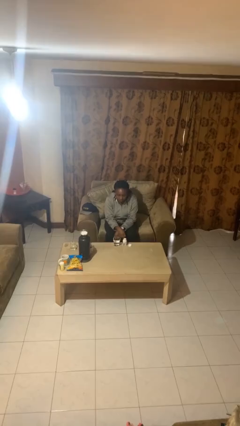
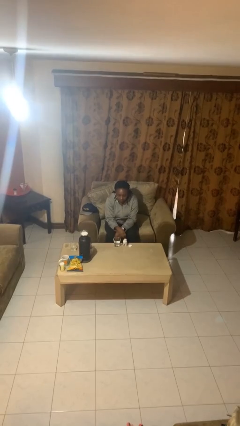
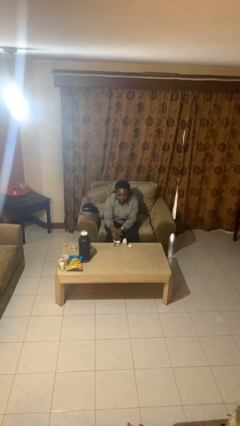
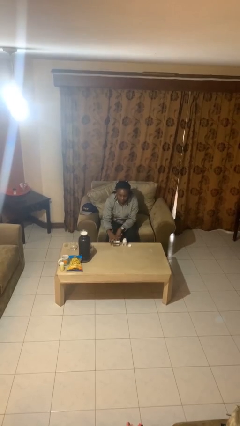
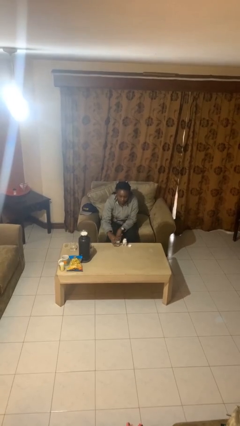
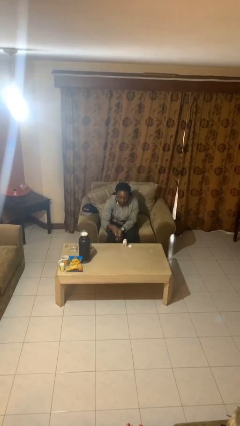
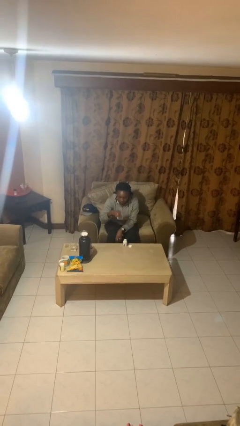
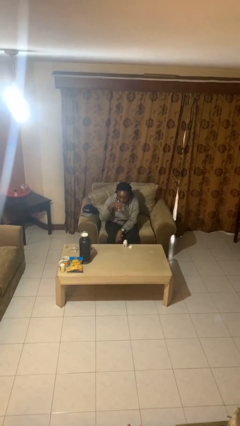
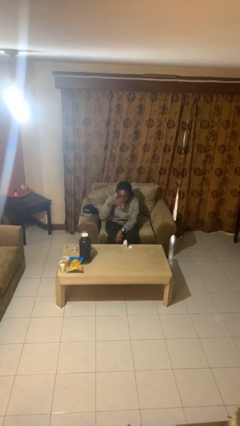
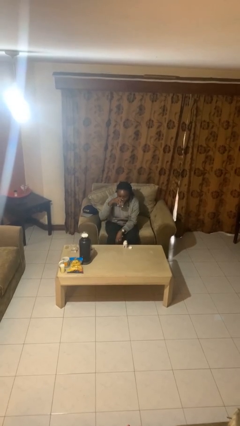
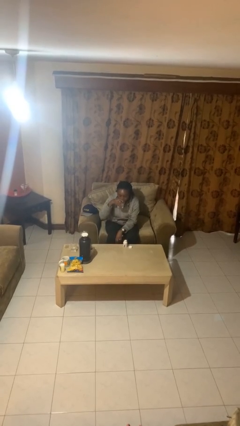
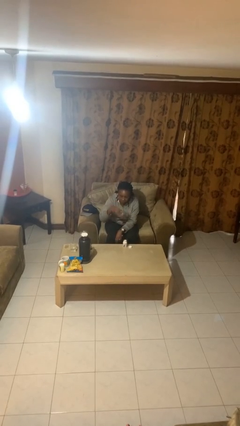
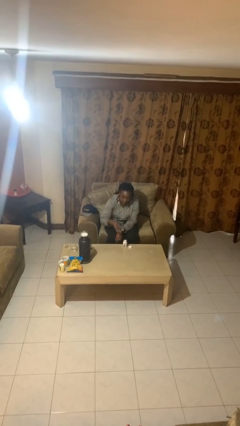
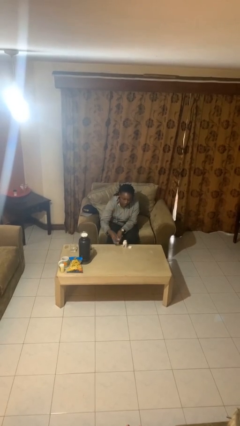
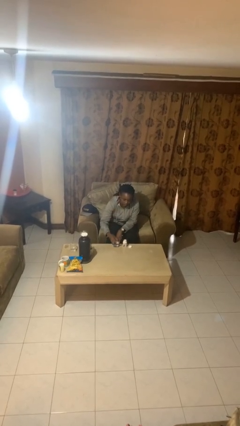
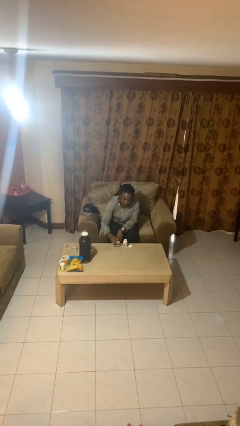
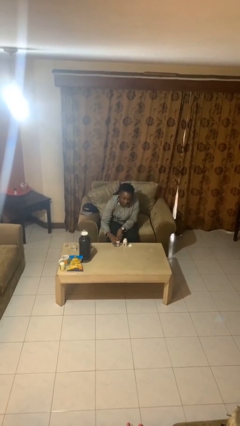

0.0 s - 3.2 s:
person drinks from cup

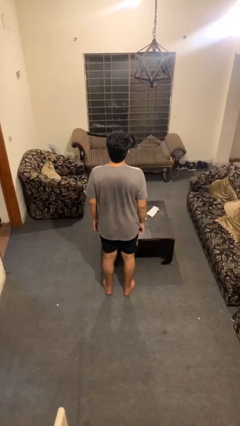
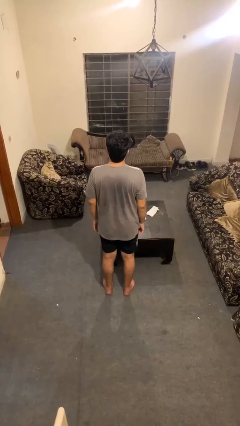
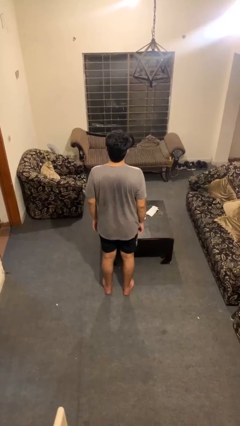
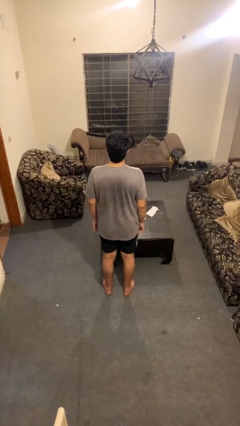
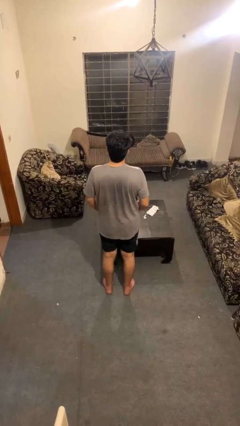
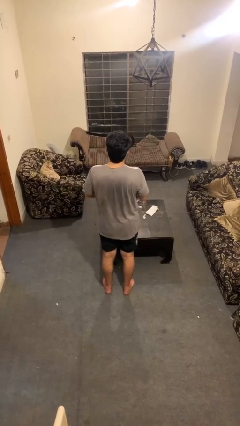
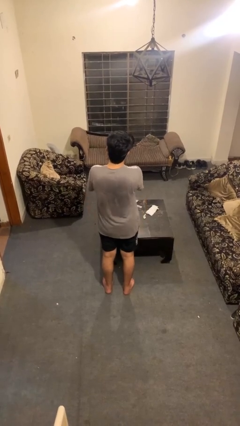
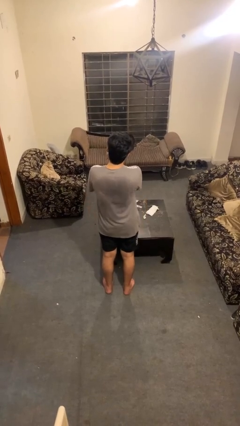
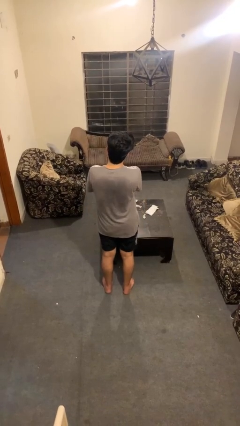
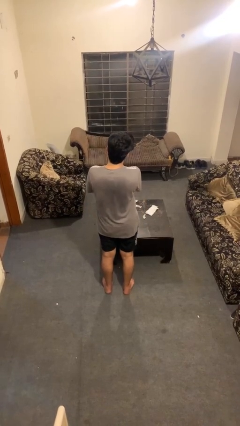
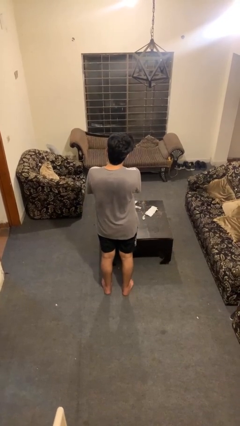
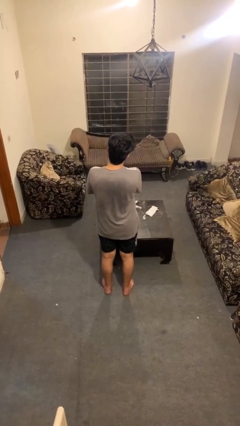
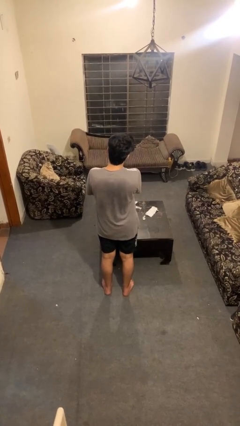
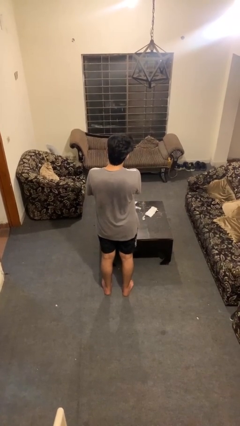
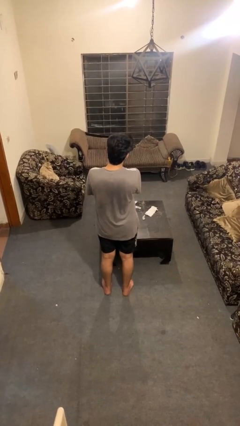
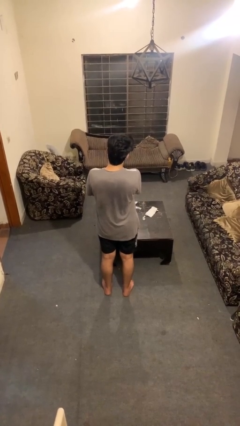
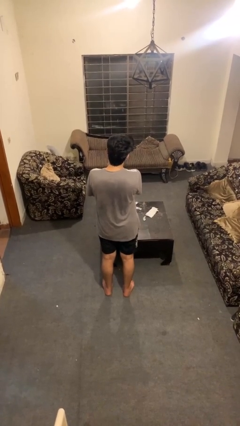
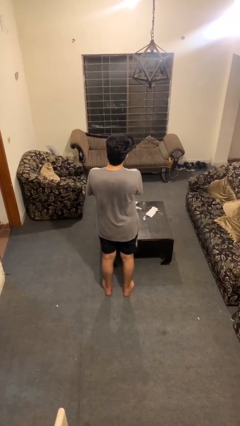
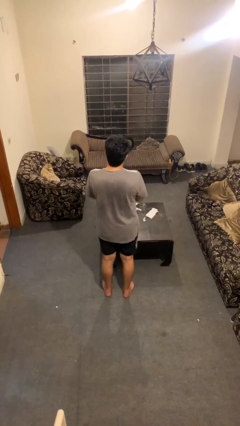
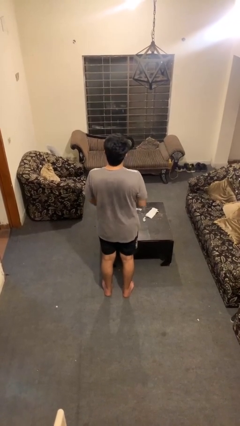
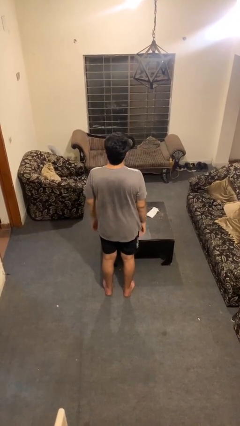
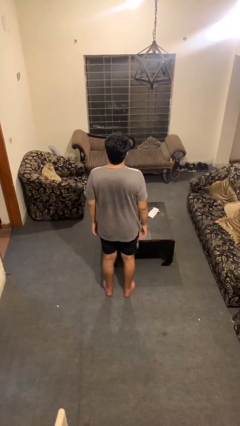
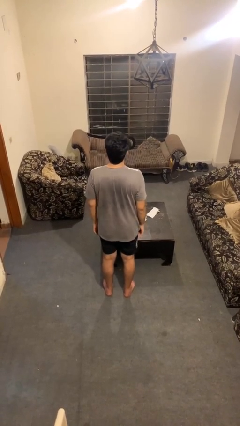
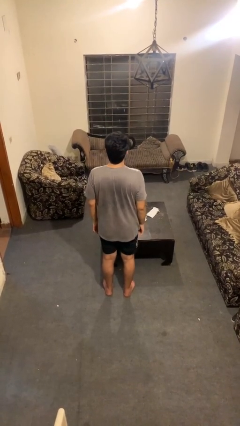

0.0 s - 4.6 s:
person strokes chin

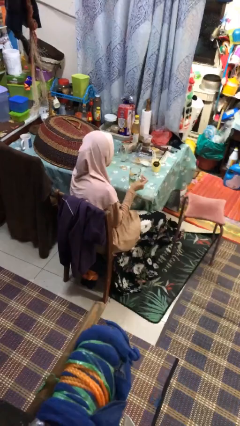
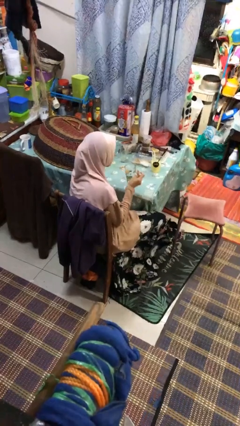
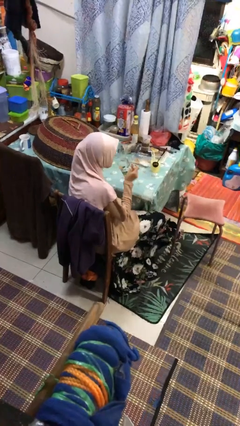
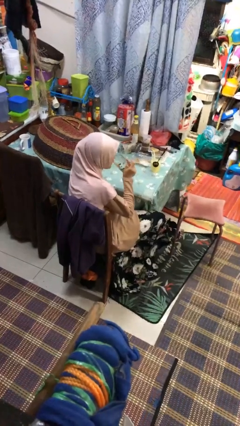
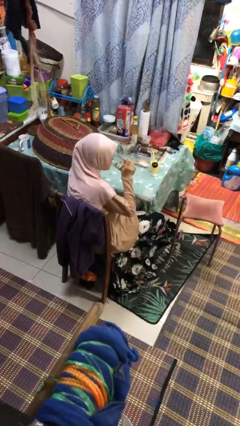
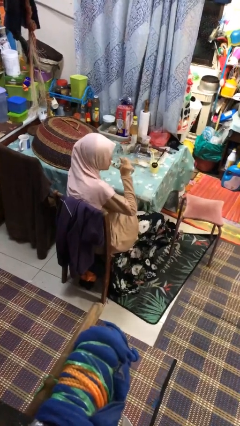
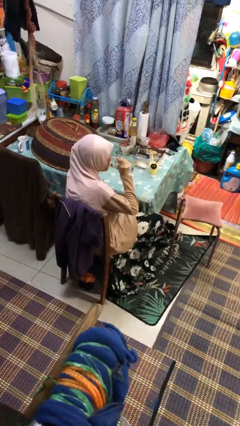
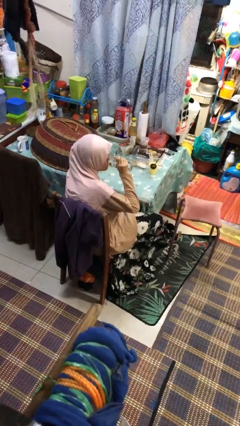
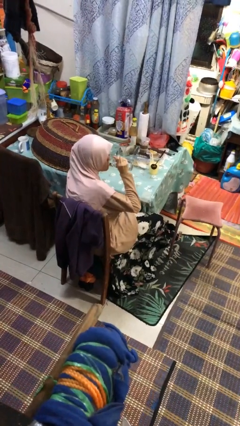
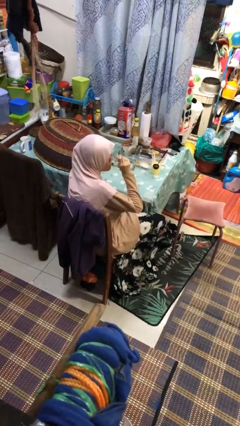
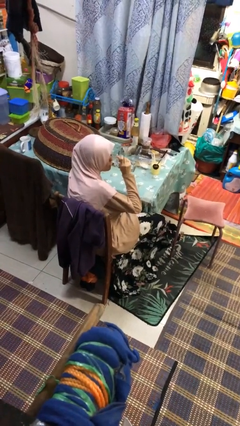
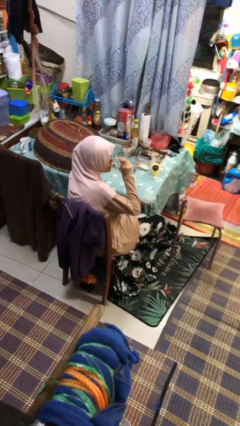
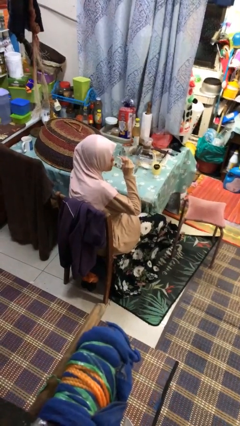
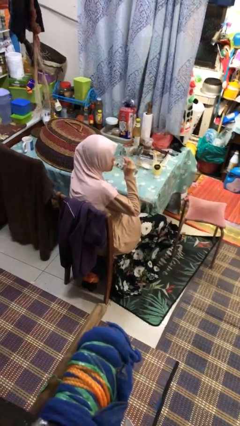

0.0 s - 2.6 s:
person drinks from mug

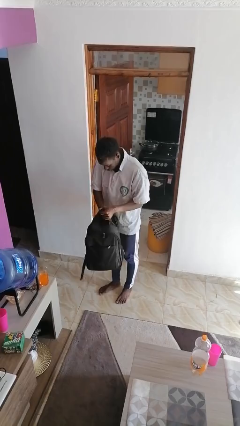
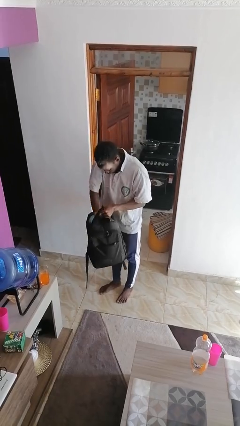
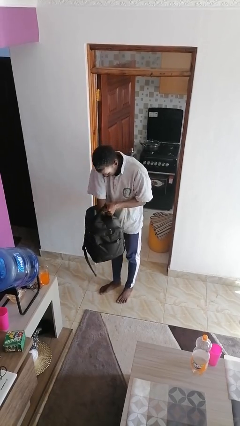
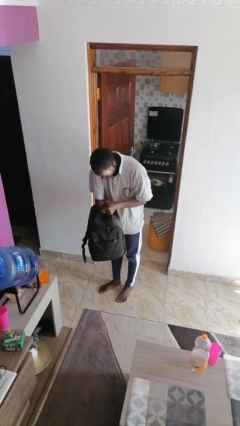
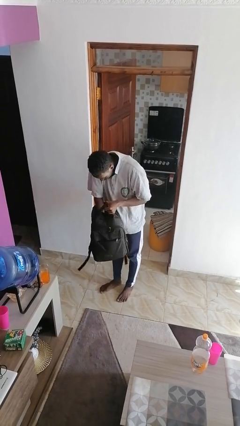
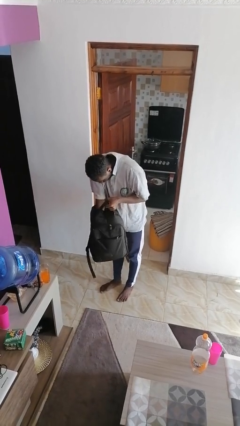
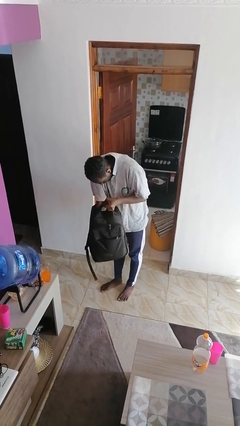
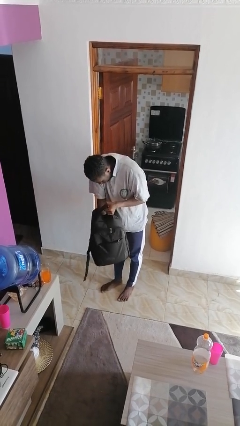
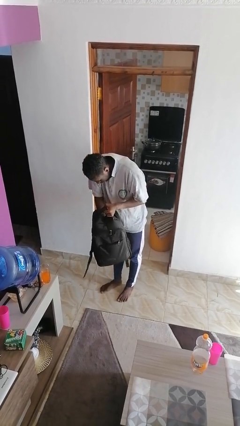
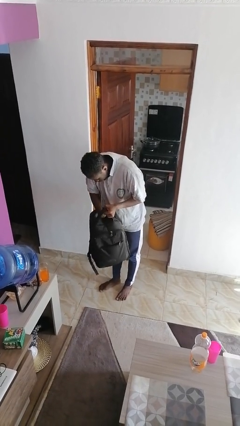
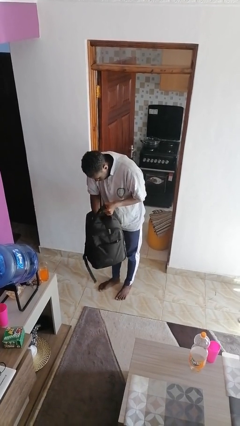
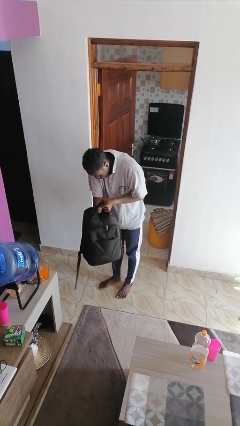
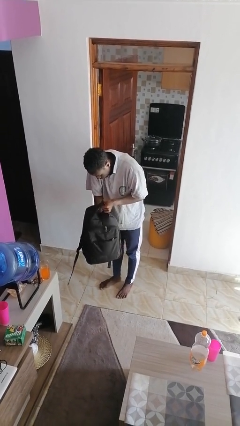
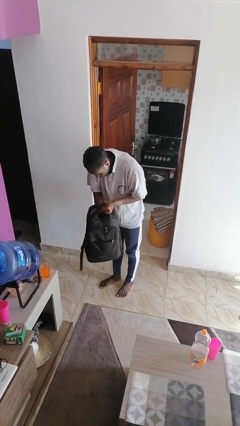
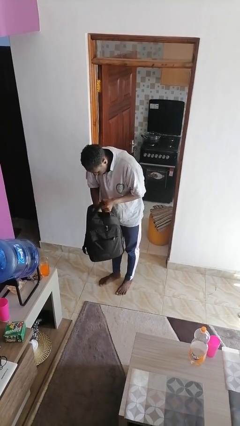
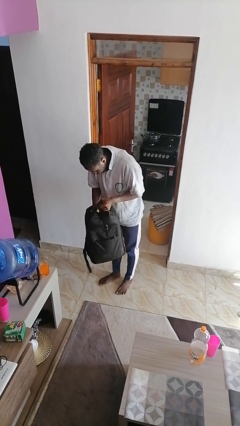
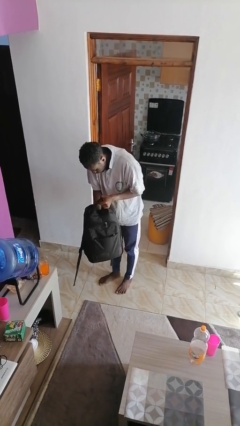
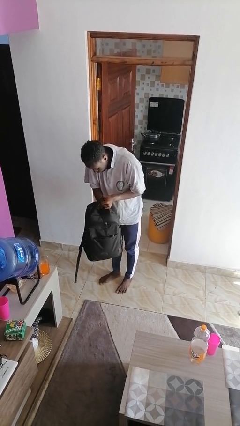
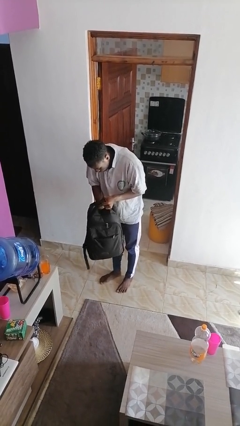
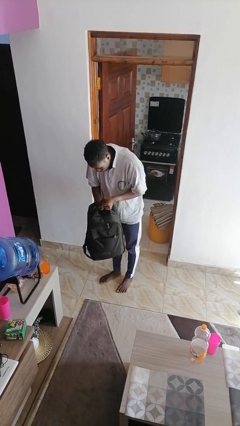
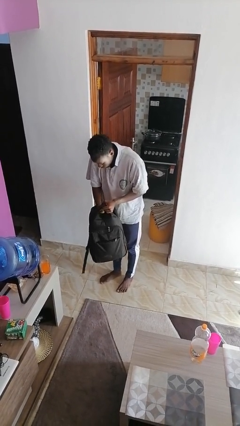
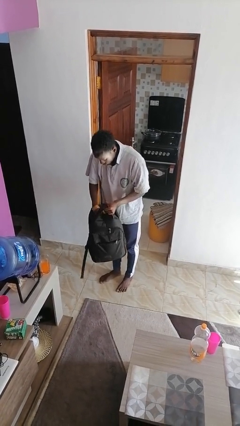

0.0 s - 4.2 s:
person searches in backpack

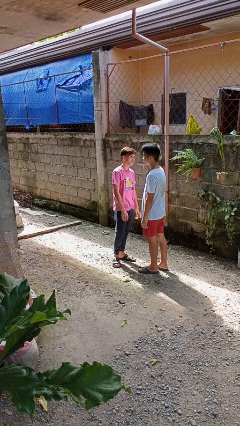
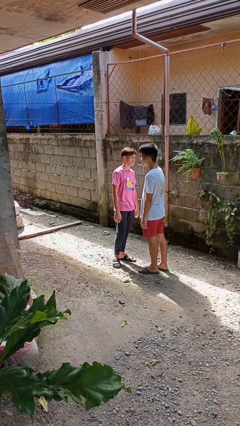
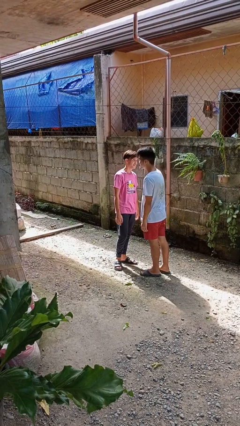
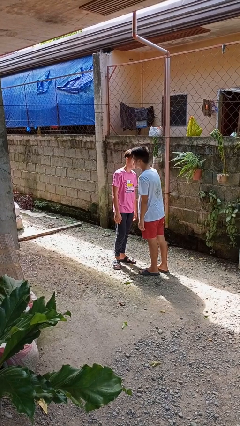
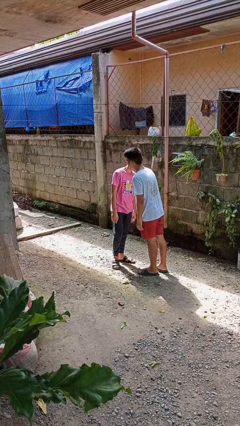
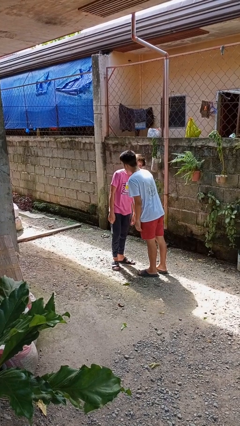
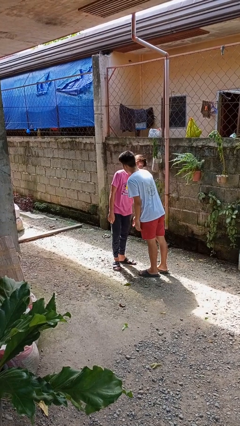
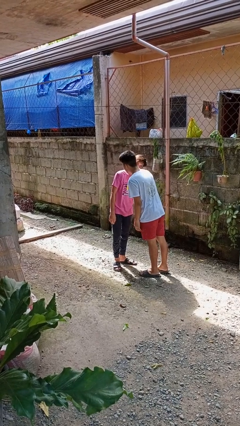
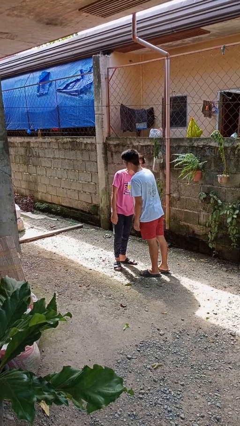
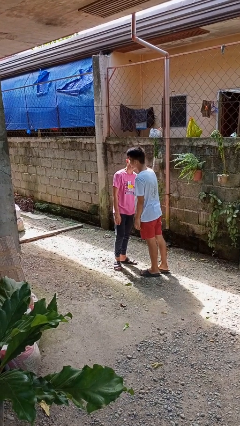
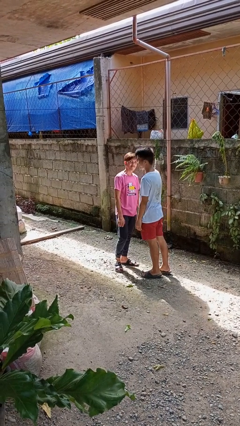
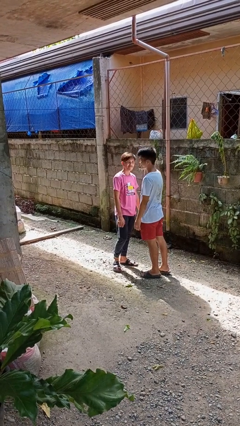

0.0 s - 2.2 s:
person kisses cheek of person

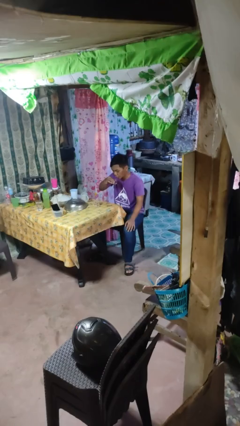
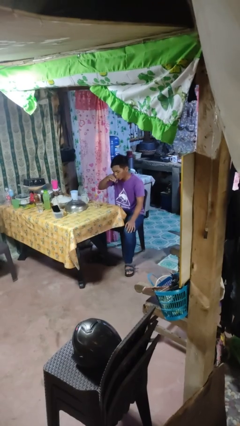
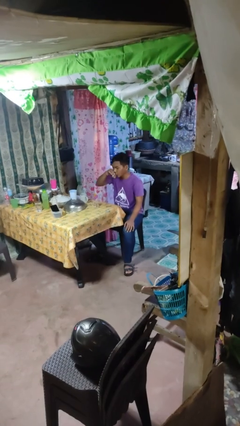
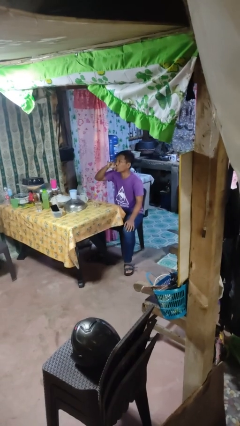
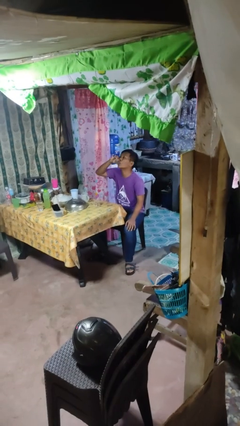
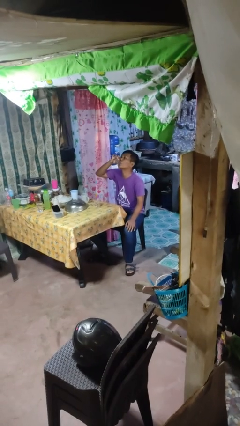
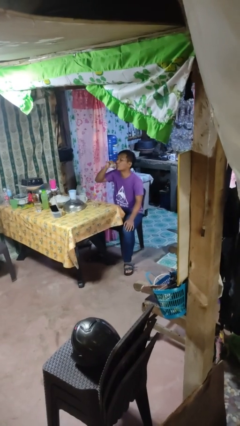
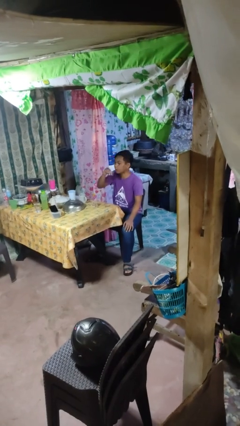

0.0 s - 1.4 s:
person drinks from shotglass
